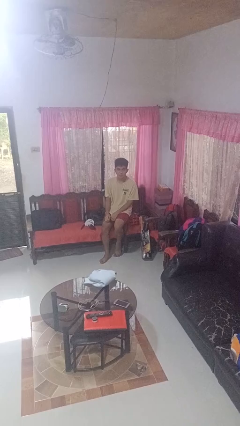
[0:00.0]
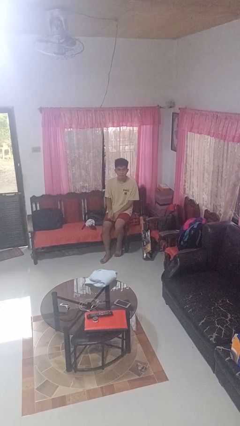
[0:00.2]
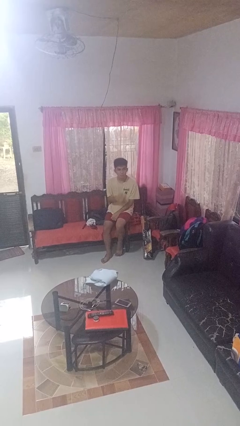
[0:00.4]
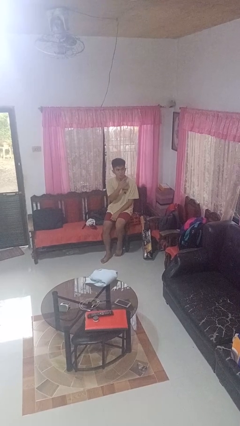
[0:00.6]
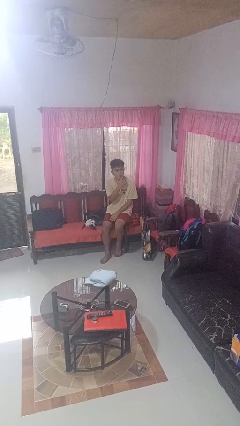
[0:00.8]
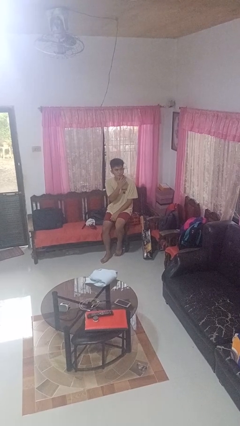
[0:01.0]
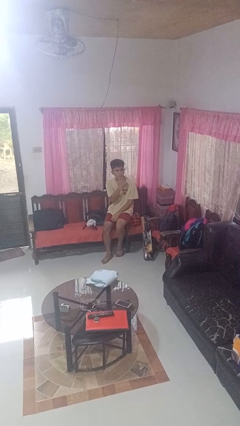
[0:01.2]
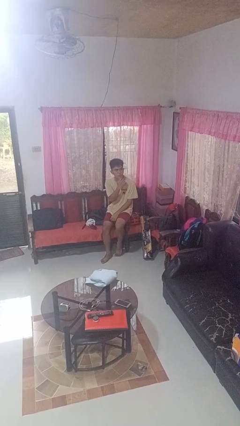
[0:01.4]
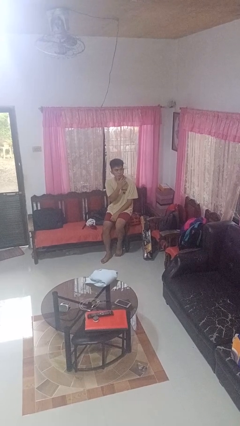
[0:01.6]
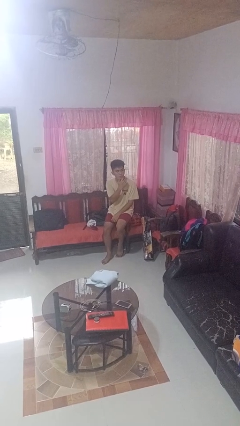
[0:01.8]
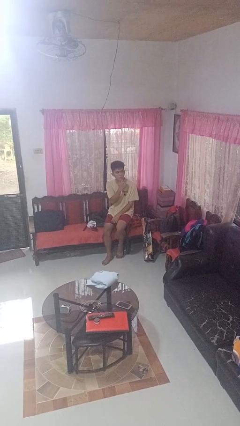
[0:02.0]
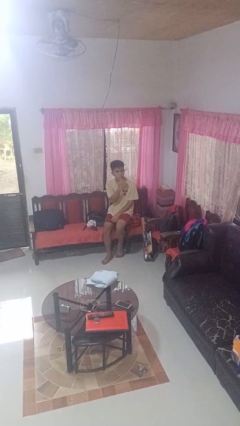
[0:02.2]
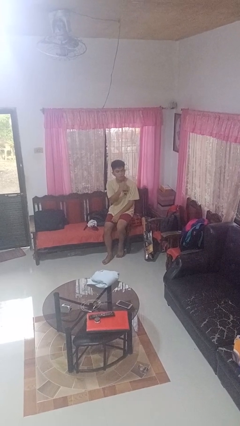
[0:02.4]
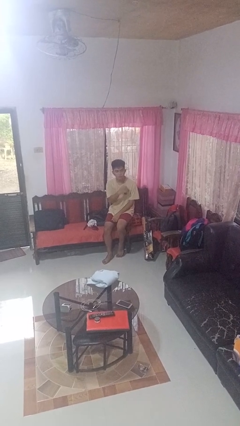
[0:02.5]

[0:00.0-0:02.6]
person strokes chin

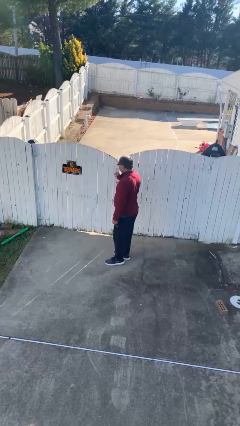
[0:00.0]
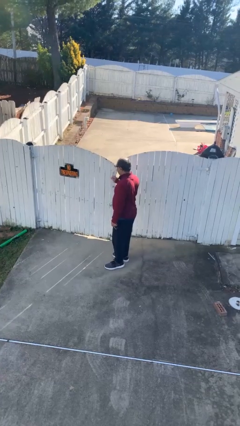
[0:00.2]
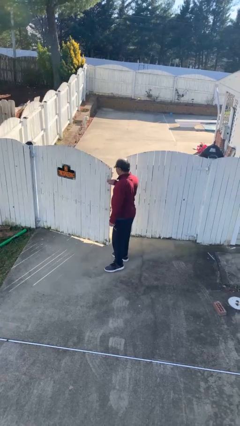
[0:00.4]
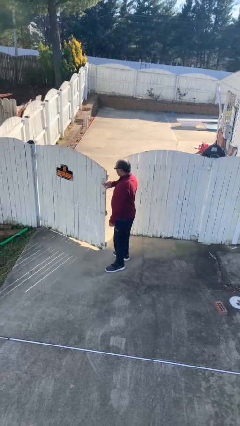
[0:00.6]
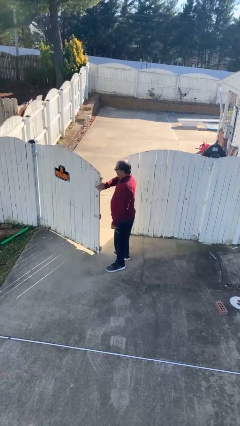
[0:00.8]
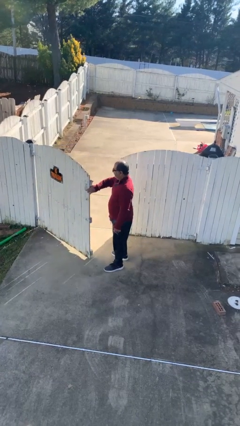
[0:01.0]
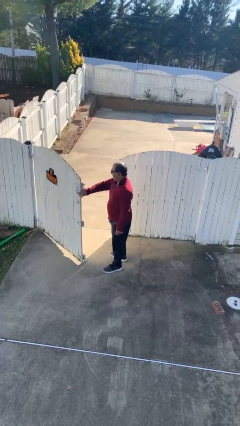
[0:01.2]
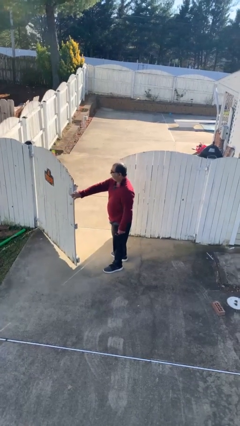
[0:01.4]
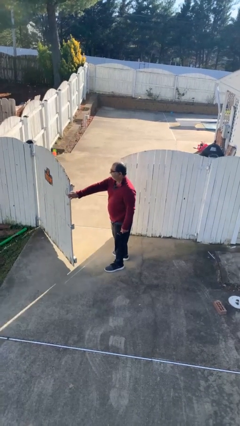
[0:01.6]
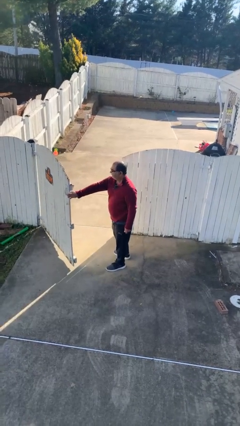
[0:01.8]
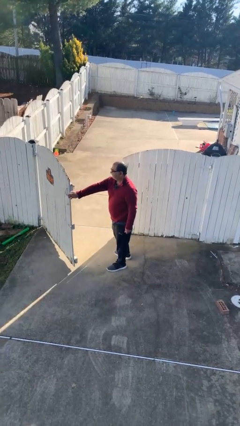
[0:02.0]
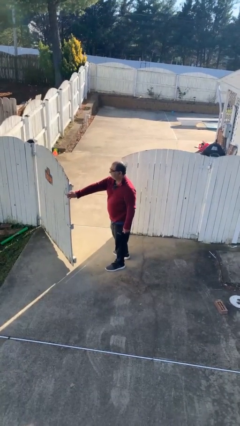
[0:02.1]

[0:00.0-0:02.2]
person opens facility door

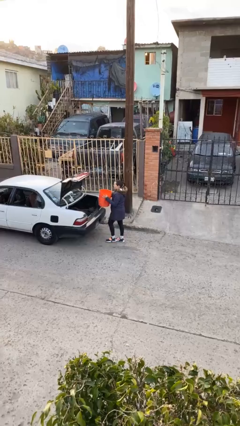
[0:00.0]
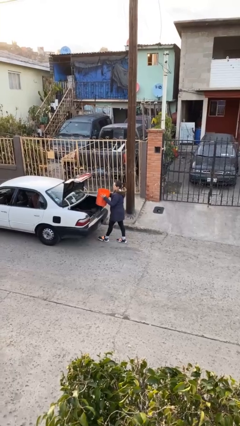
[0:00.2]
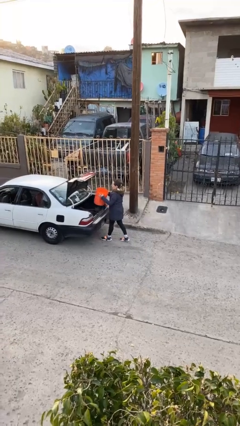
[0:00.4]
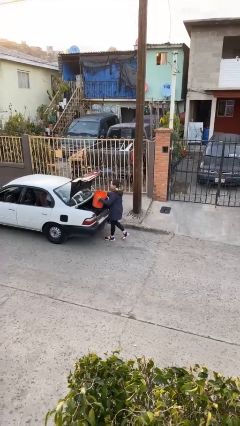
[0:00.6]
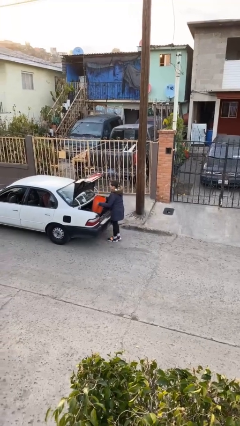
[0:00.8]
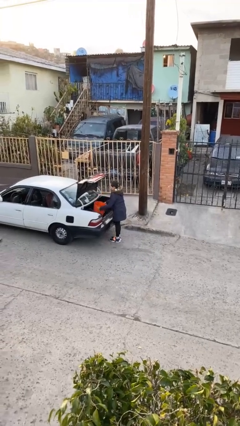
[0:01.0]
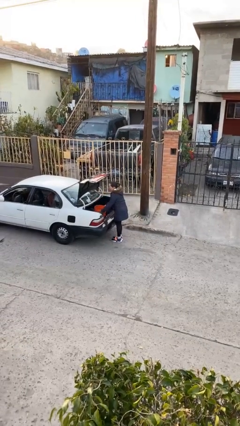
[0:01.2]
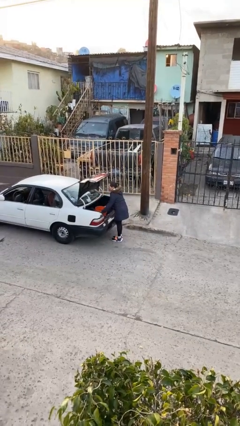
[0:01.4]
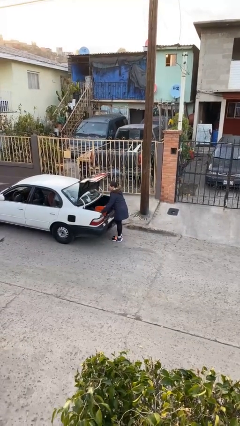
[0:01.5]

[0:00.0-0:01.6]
person loads car

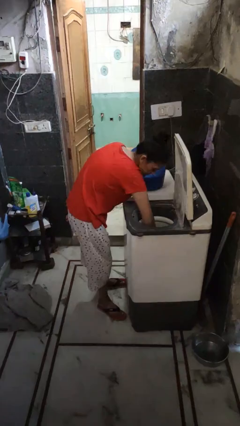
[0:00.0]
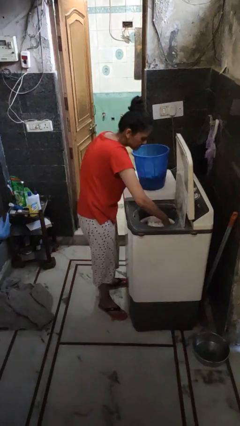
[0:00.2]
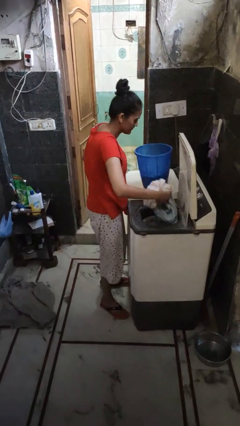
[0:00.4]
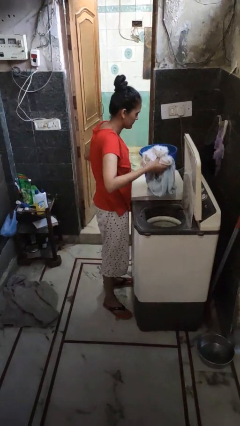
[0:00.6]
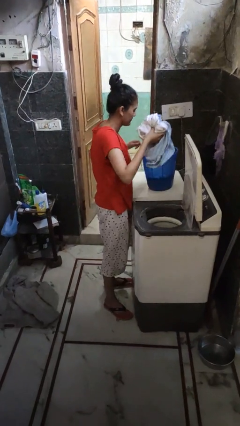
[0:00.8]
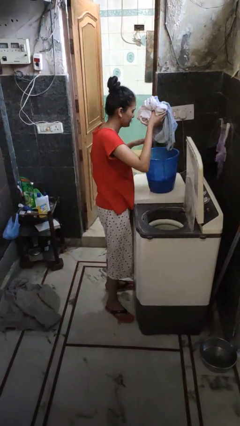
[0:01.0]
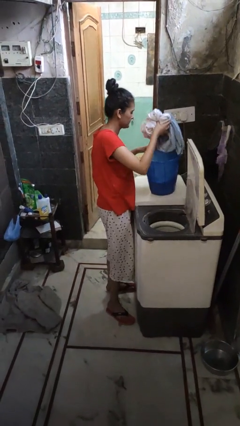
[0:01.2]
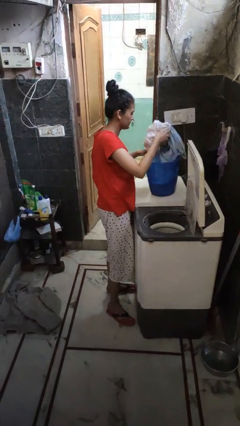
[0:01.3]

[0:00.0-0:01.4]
person unloads clotheswasher

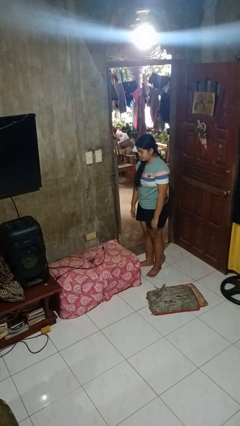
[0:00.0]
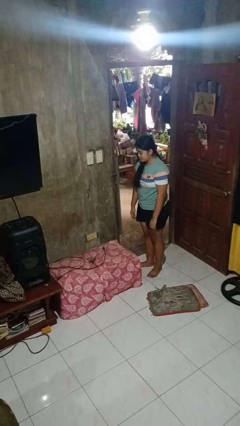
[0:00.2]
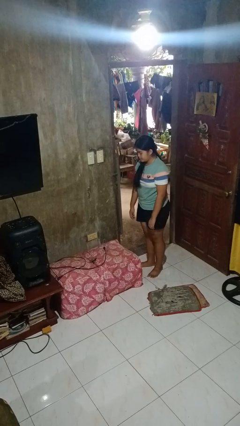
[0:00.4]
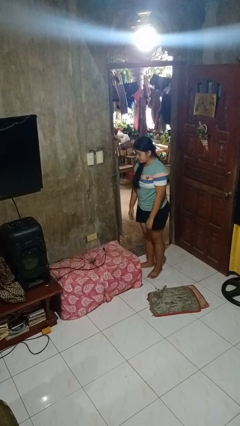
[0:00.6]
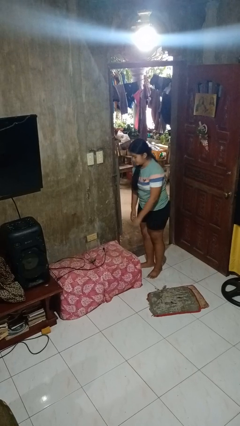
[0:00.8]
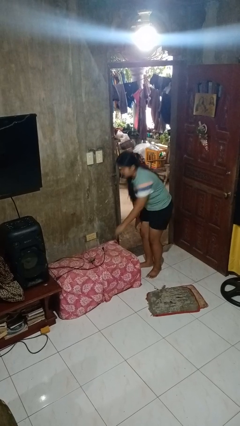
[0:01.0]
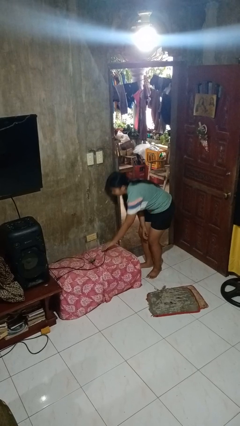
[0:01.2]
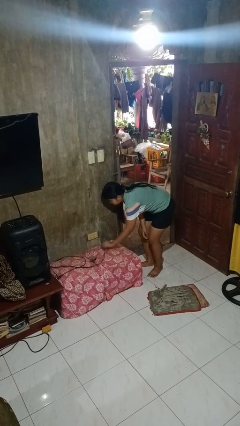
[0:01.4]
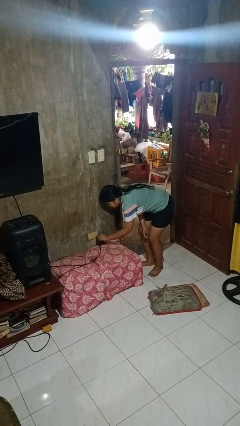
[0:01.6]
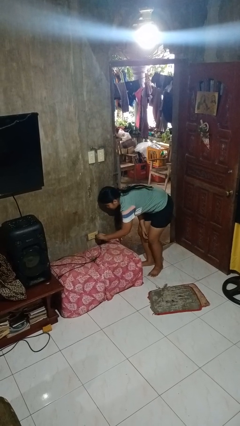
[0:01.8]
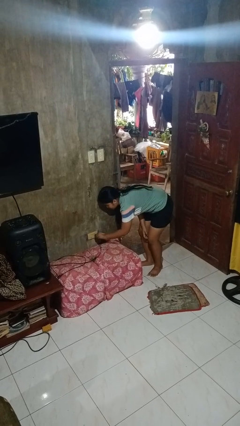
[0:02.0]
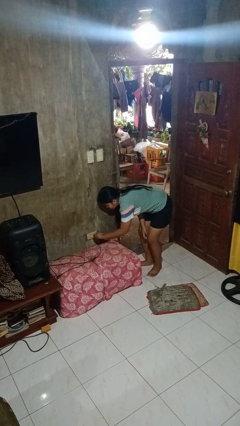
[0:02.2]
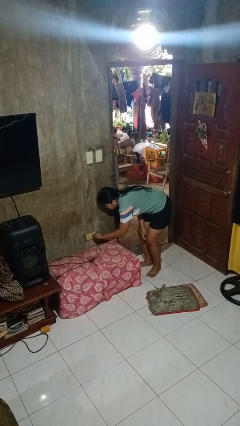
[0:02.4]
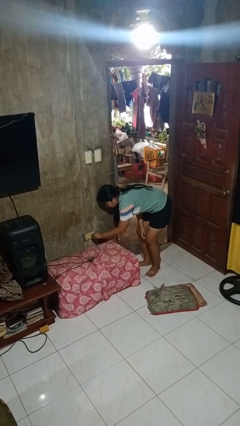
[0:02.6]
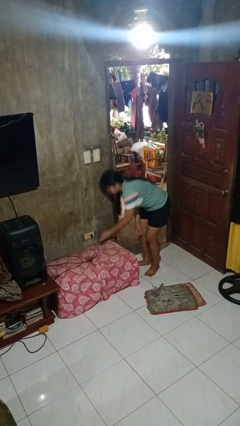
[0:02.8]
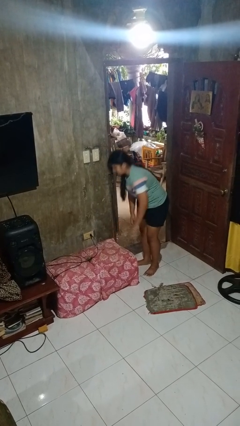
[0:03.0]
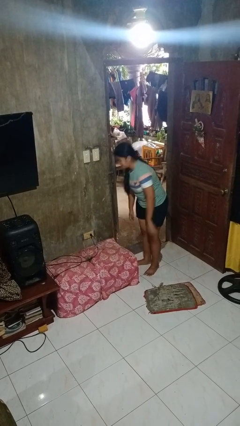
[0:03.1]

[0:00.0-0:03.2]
person plugs into electrical socket

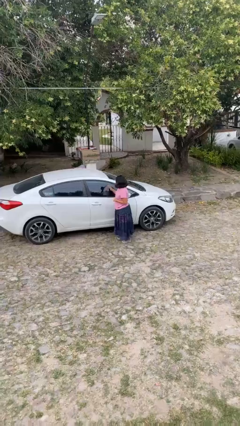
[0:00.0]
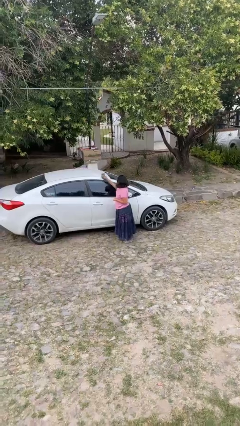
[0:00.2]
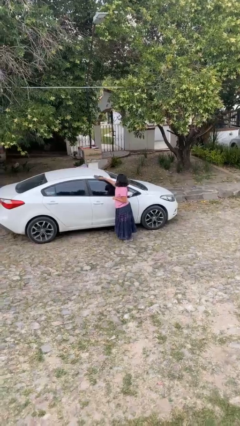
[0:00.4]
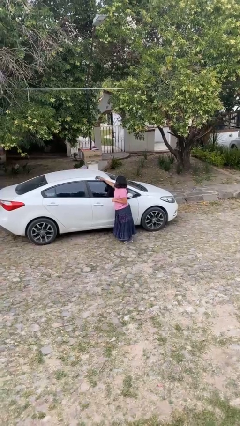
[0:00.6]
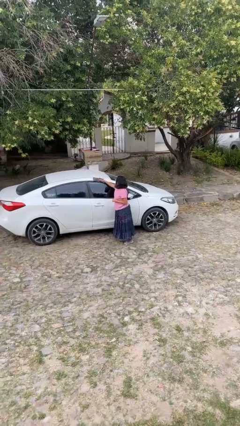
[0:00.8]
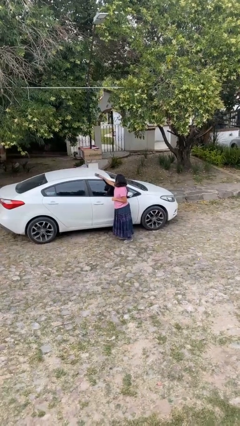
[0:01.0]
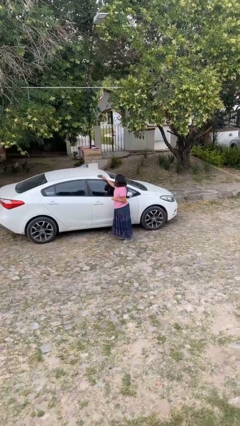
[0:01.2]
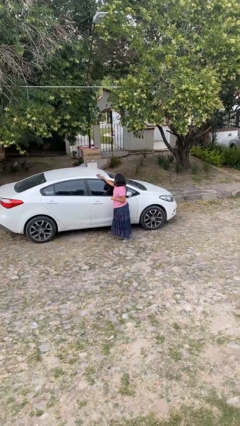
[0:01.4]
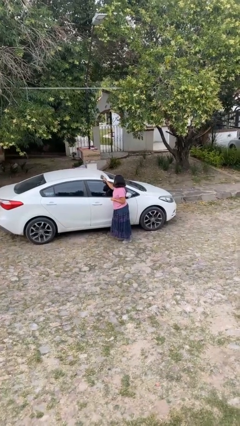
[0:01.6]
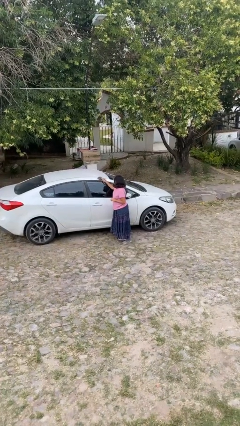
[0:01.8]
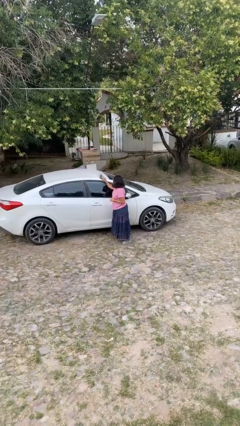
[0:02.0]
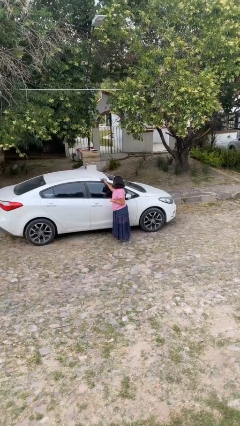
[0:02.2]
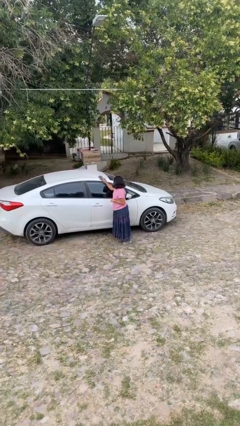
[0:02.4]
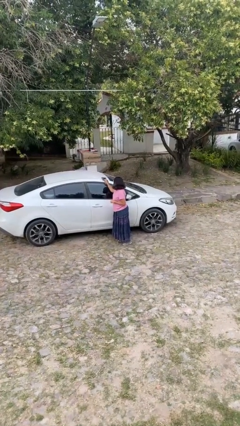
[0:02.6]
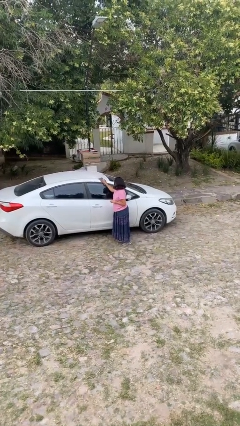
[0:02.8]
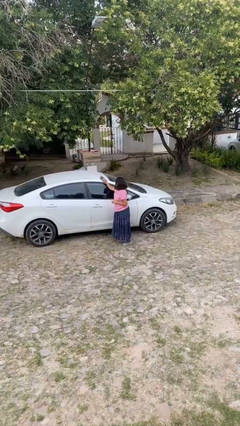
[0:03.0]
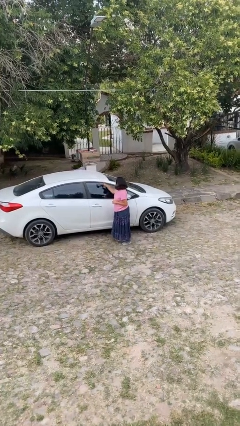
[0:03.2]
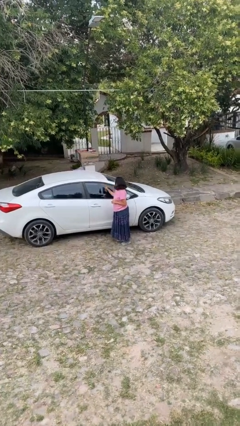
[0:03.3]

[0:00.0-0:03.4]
person polishes car with rag

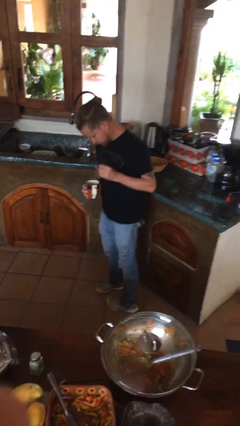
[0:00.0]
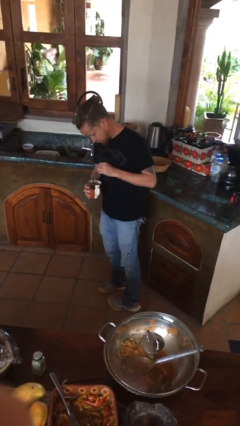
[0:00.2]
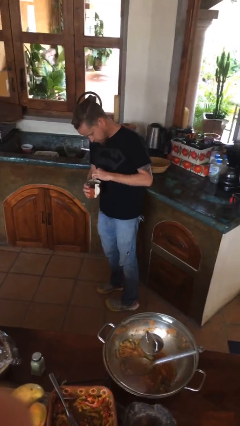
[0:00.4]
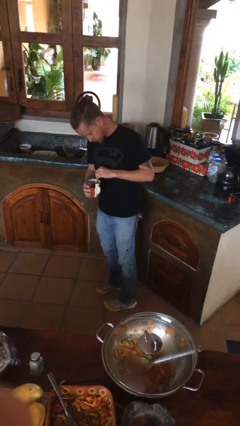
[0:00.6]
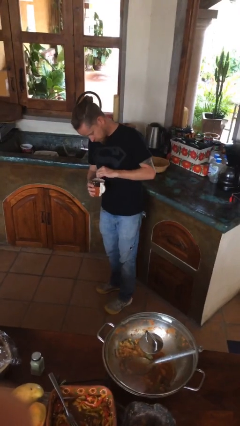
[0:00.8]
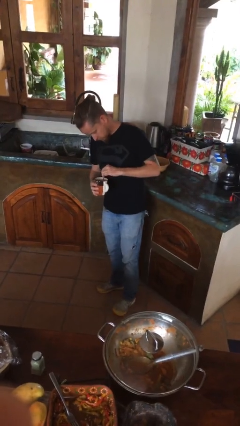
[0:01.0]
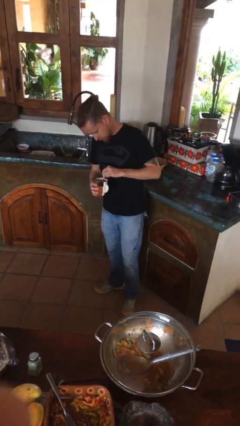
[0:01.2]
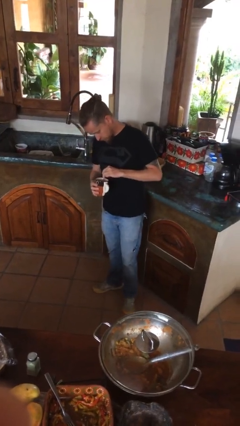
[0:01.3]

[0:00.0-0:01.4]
person stirs mug

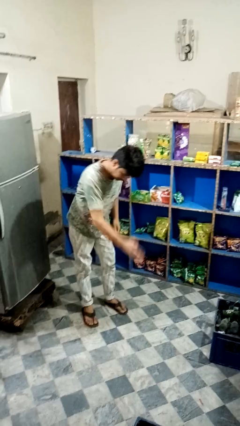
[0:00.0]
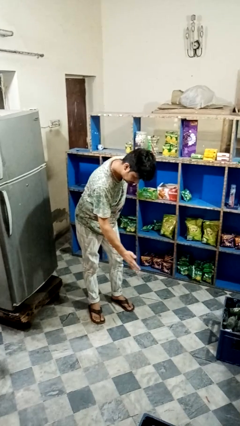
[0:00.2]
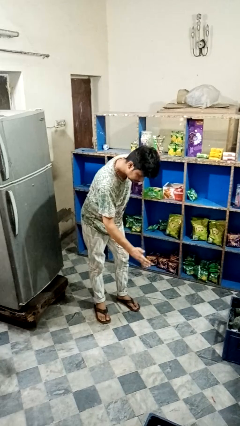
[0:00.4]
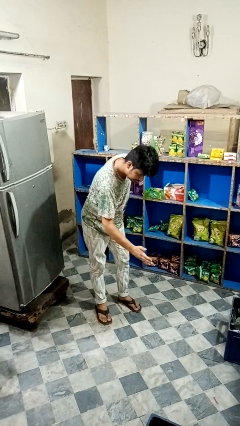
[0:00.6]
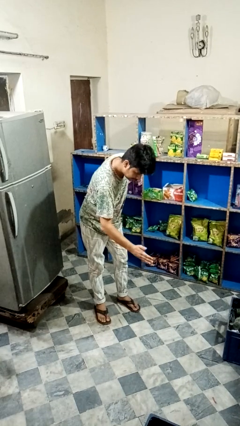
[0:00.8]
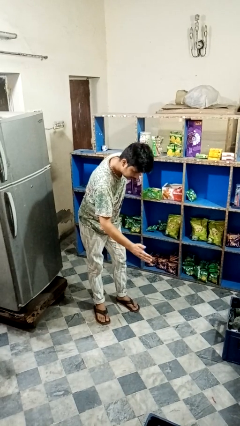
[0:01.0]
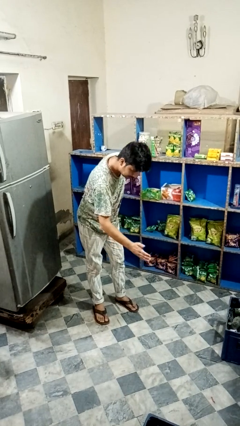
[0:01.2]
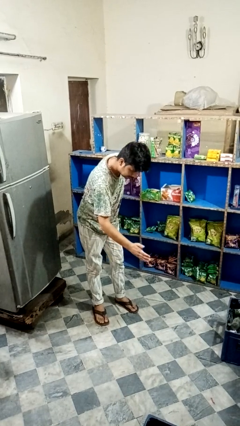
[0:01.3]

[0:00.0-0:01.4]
person karate chop
